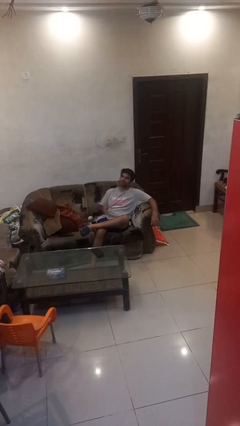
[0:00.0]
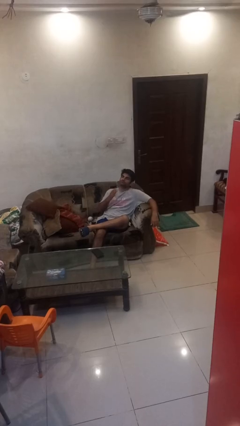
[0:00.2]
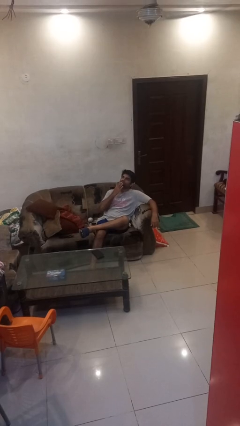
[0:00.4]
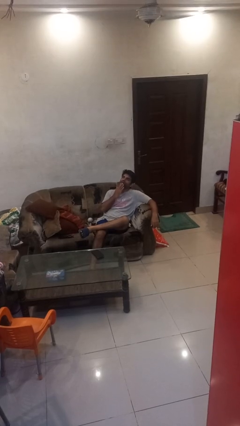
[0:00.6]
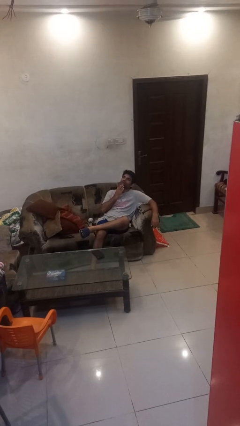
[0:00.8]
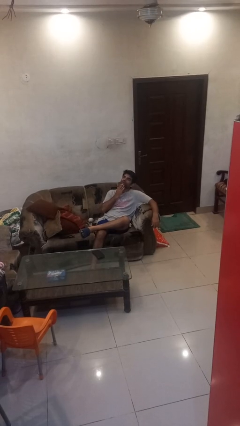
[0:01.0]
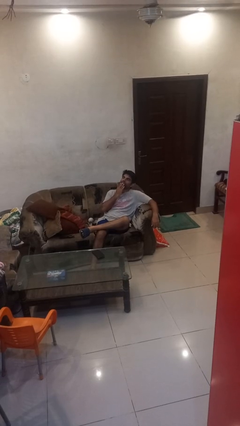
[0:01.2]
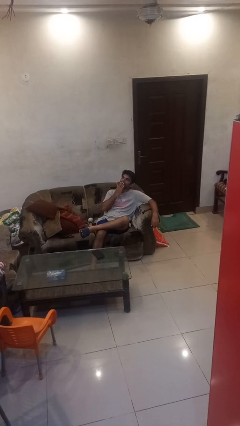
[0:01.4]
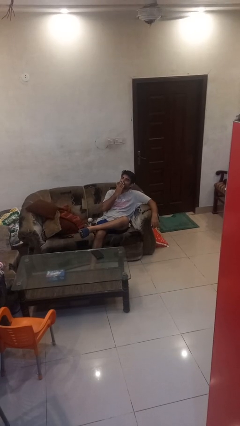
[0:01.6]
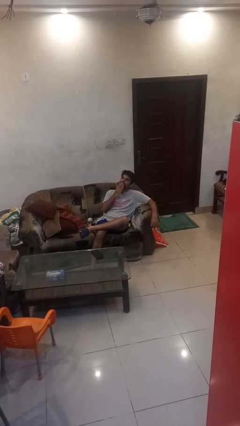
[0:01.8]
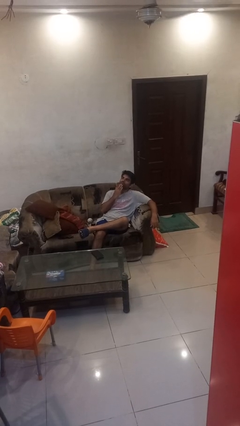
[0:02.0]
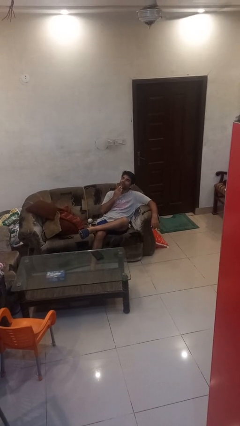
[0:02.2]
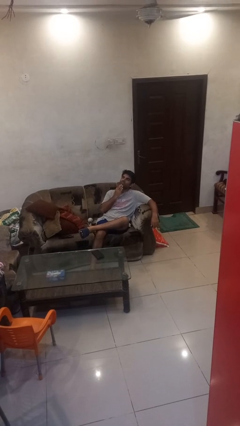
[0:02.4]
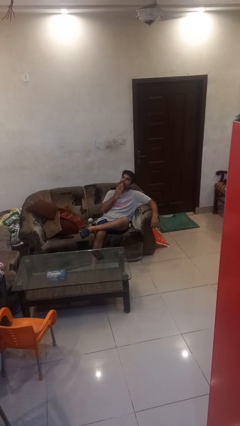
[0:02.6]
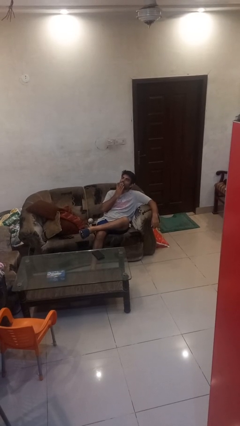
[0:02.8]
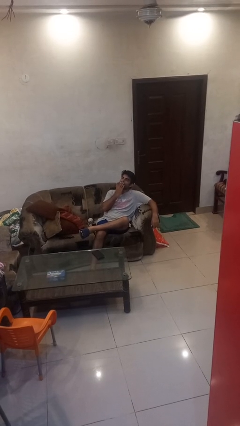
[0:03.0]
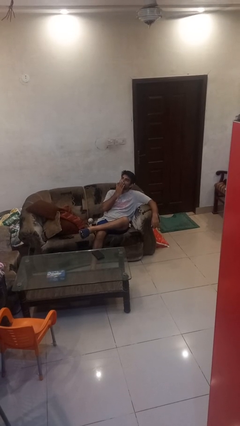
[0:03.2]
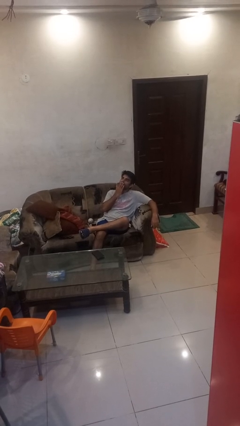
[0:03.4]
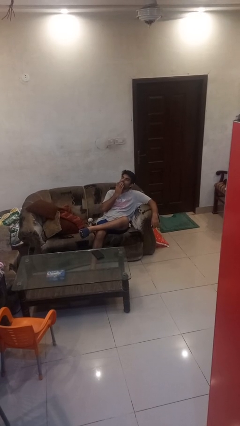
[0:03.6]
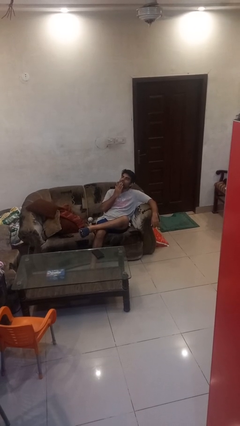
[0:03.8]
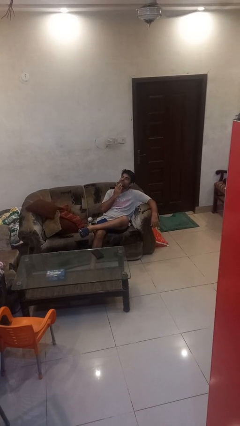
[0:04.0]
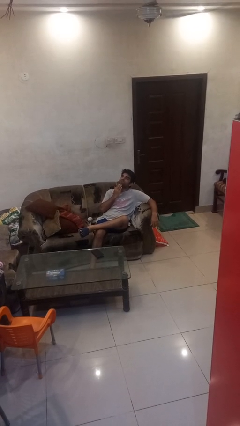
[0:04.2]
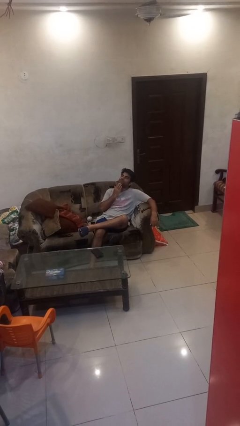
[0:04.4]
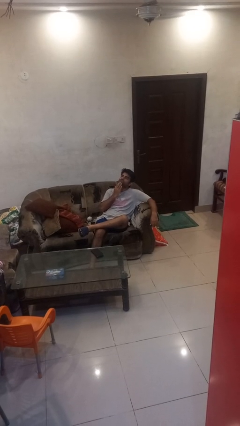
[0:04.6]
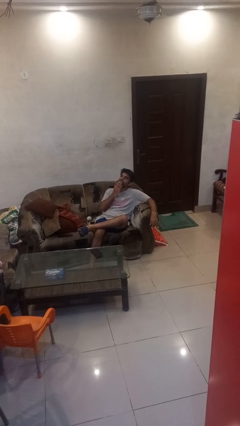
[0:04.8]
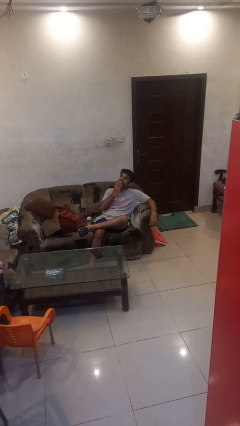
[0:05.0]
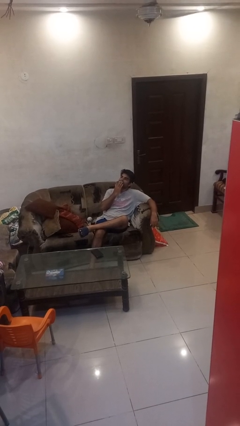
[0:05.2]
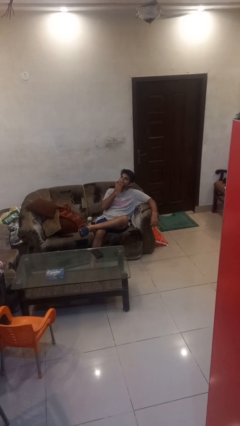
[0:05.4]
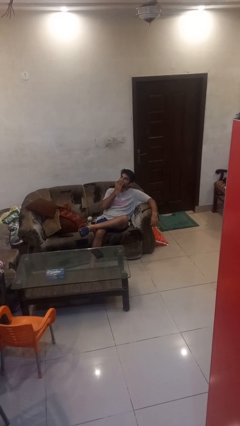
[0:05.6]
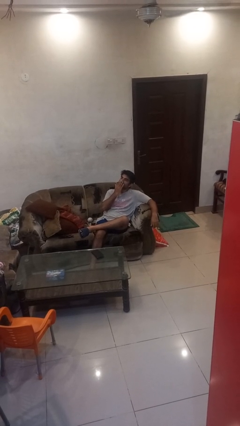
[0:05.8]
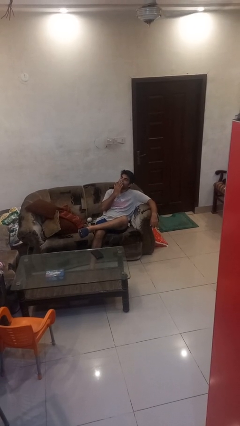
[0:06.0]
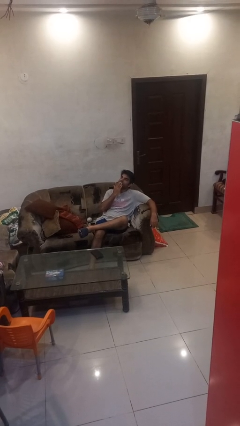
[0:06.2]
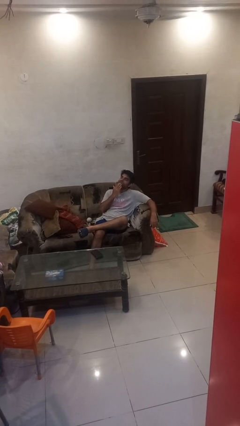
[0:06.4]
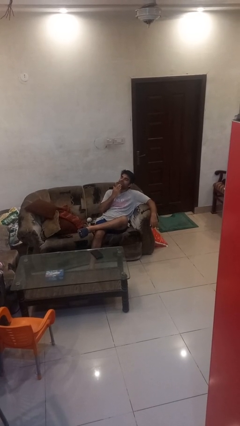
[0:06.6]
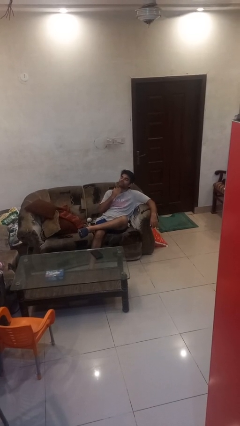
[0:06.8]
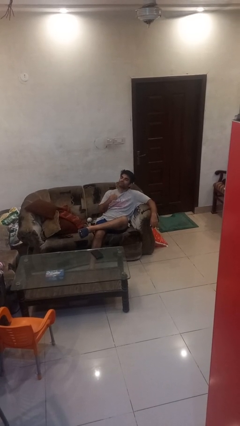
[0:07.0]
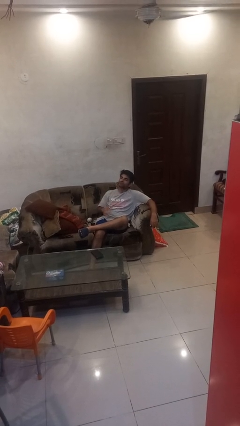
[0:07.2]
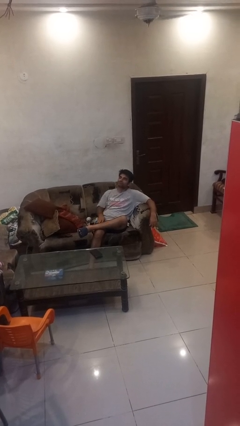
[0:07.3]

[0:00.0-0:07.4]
person strokes chin

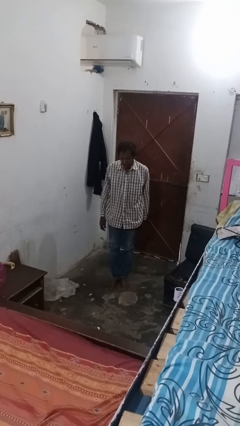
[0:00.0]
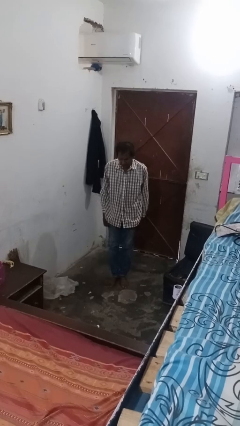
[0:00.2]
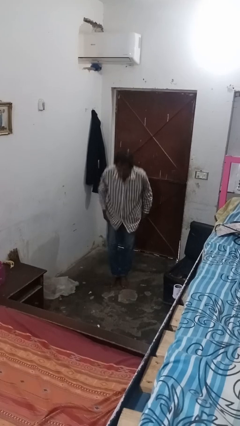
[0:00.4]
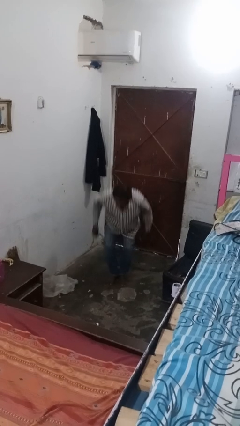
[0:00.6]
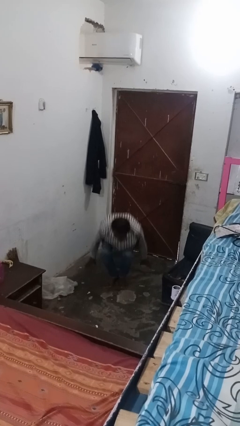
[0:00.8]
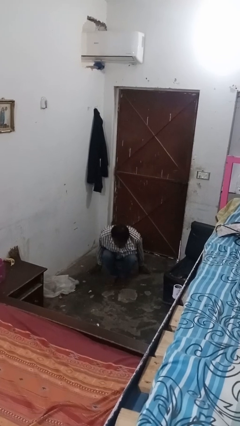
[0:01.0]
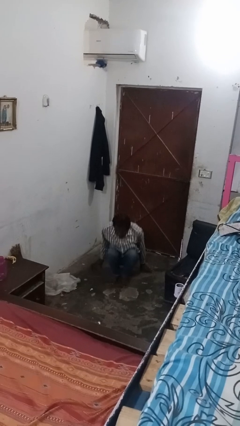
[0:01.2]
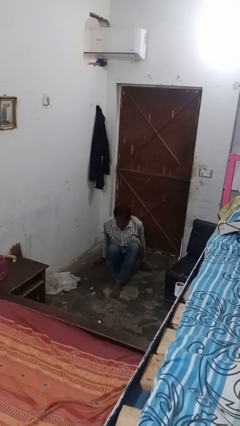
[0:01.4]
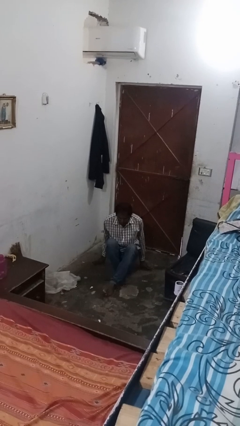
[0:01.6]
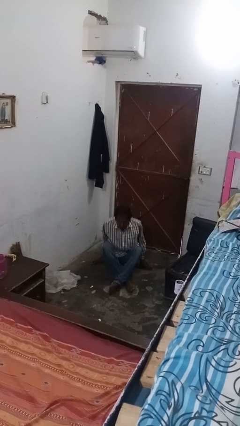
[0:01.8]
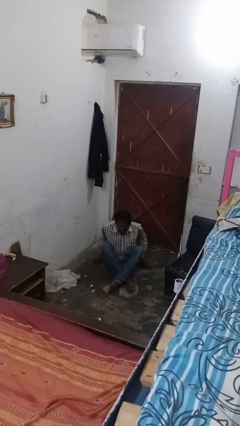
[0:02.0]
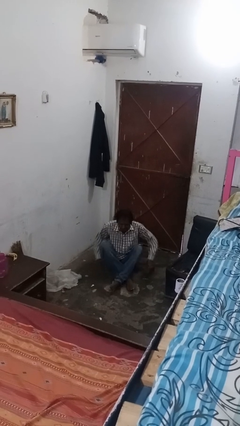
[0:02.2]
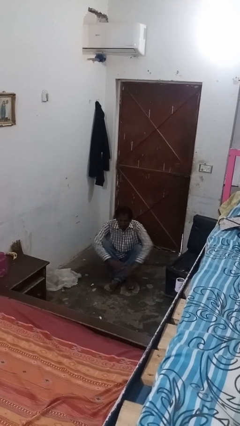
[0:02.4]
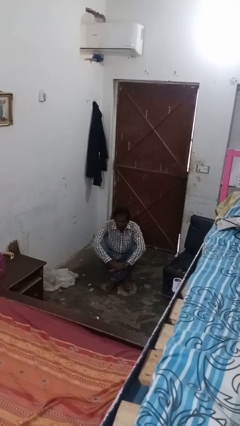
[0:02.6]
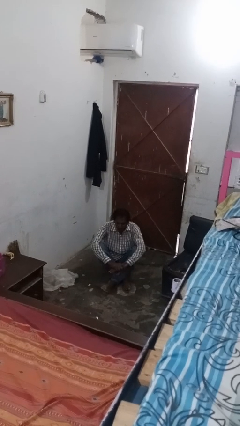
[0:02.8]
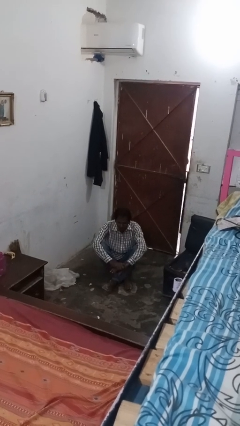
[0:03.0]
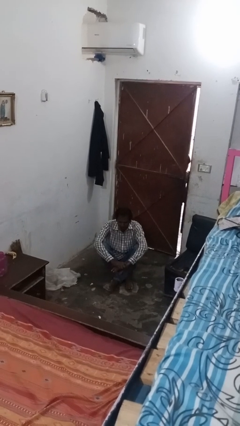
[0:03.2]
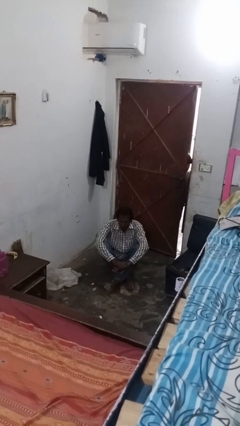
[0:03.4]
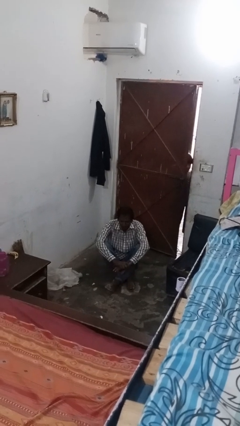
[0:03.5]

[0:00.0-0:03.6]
person sits crisscross

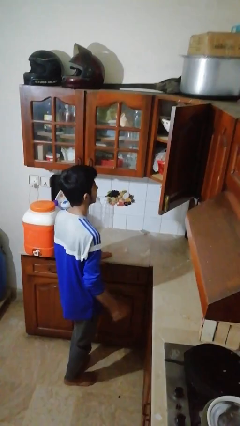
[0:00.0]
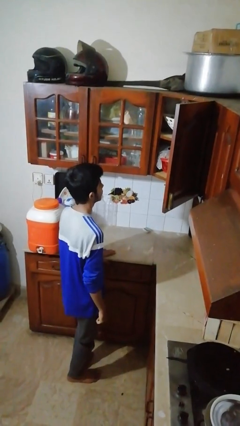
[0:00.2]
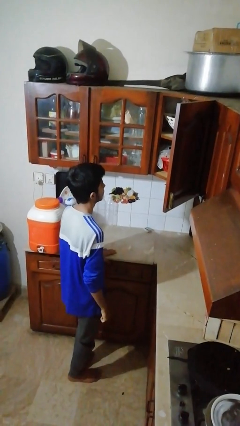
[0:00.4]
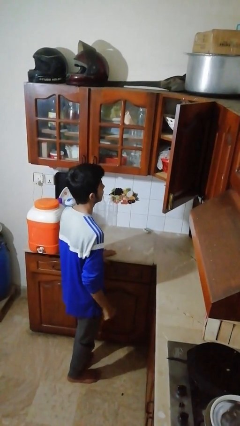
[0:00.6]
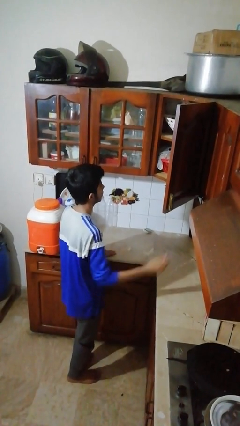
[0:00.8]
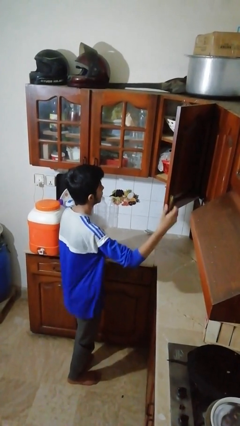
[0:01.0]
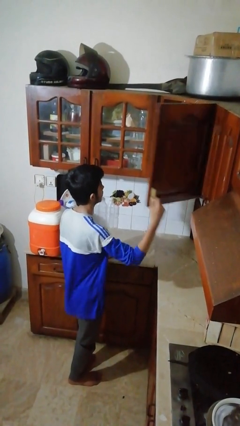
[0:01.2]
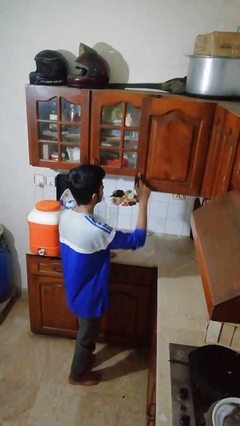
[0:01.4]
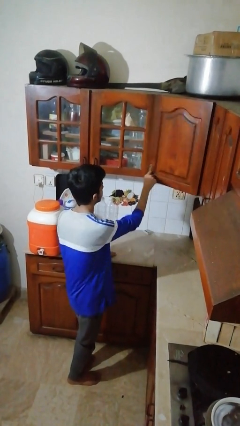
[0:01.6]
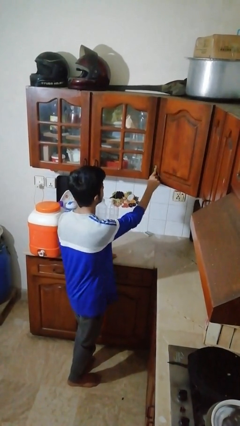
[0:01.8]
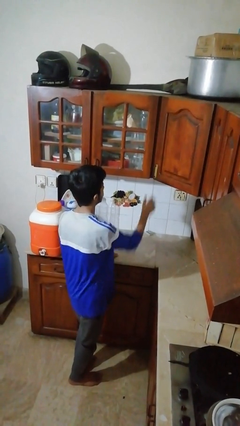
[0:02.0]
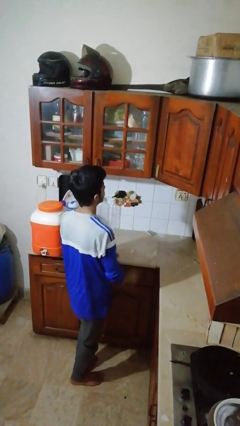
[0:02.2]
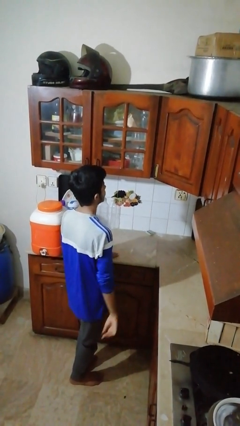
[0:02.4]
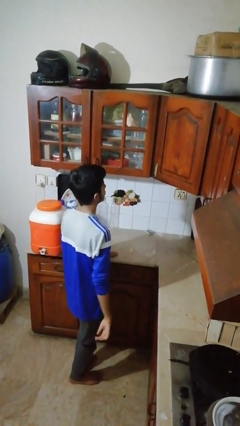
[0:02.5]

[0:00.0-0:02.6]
person closes cabinet

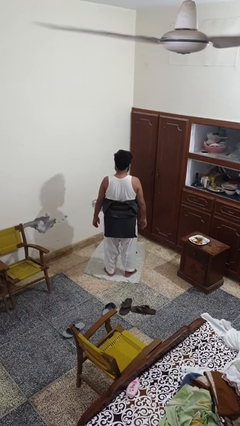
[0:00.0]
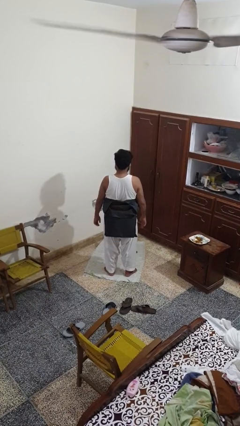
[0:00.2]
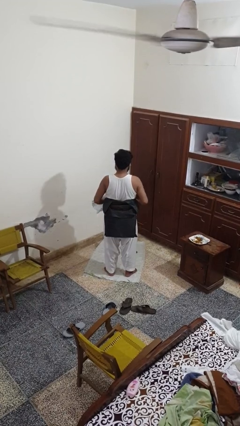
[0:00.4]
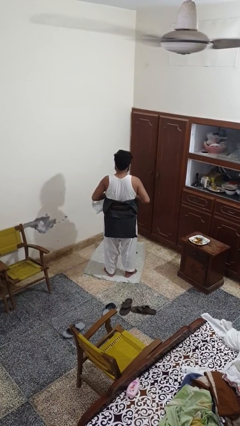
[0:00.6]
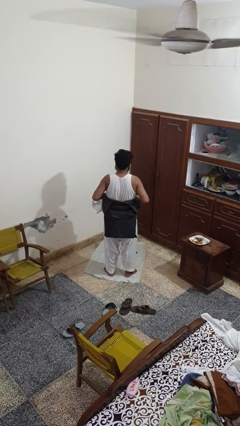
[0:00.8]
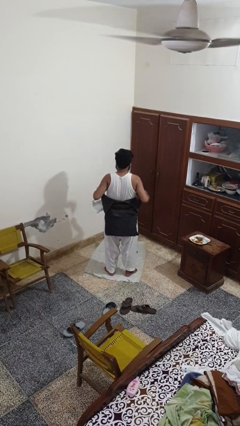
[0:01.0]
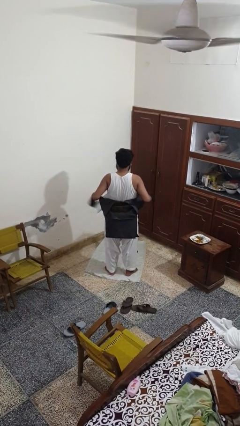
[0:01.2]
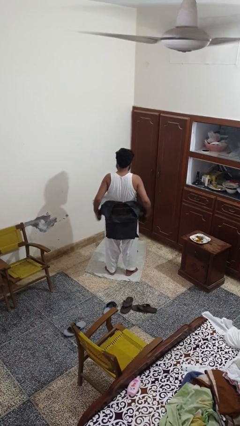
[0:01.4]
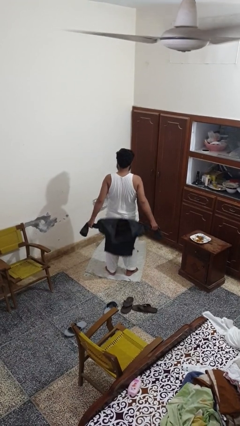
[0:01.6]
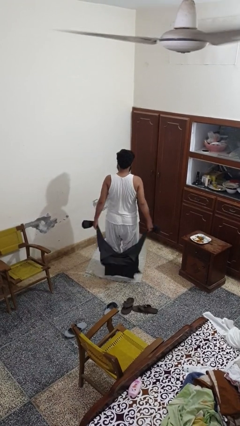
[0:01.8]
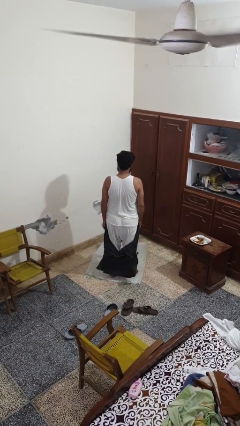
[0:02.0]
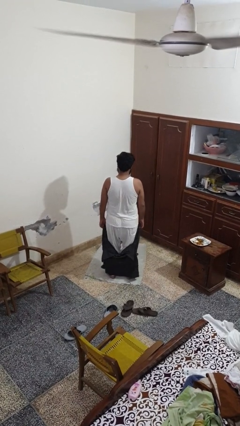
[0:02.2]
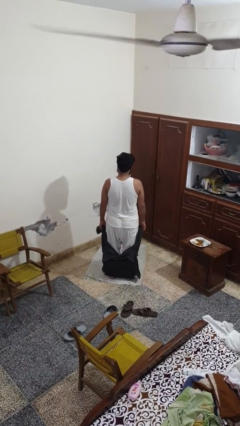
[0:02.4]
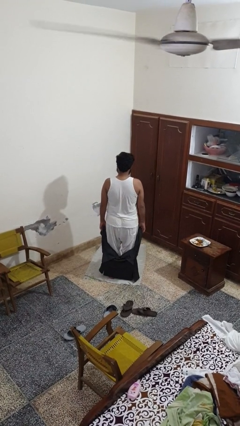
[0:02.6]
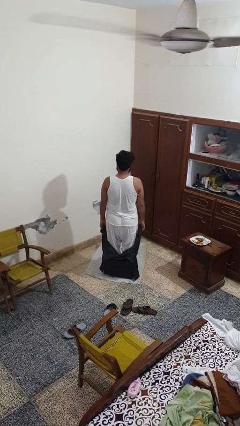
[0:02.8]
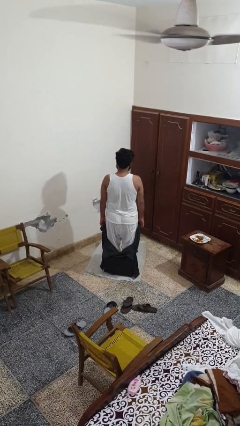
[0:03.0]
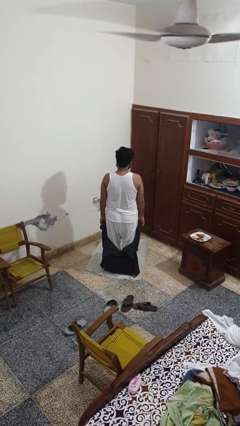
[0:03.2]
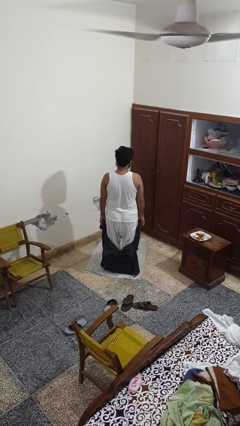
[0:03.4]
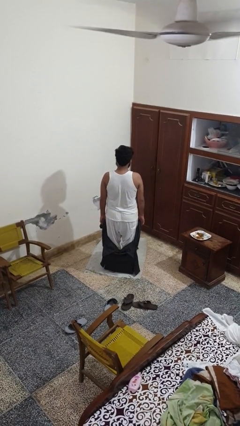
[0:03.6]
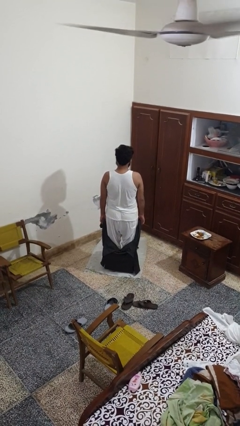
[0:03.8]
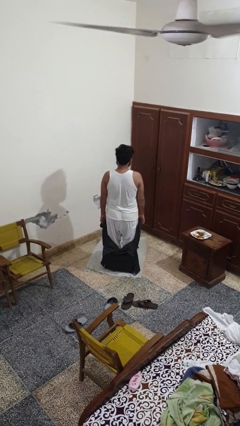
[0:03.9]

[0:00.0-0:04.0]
person unties jacket around waist
